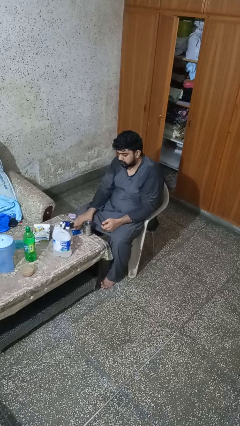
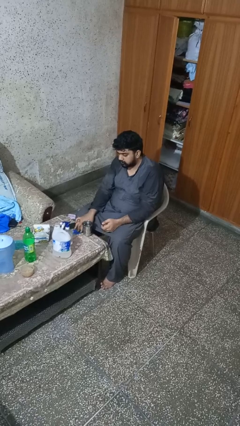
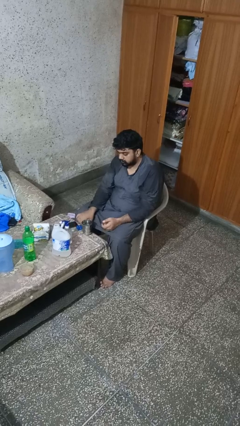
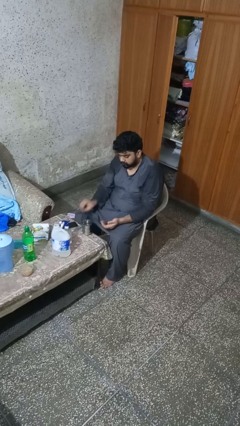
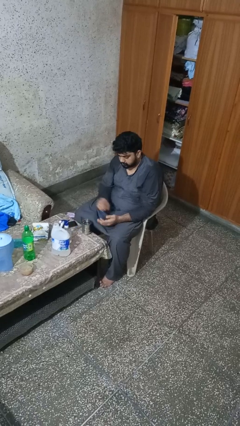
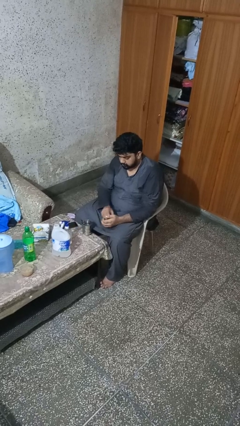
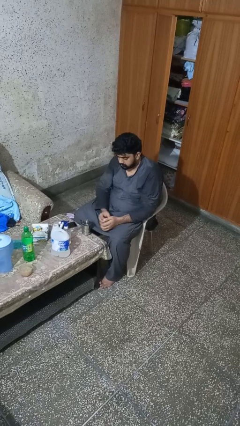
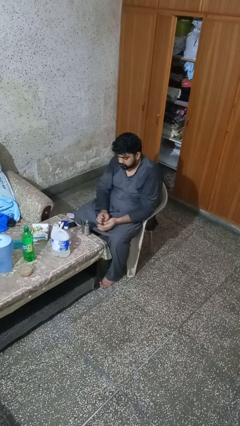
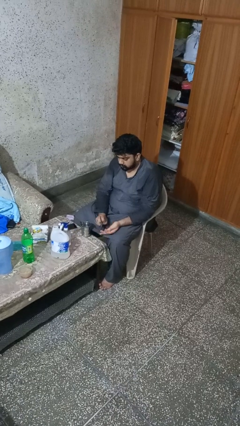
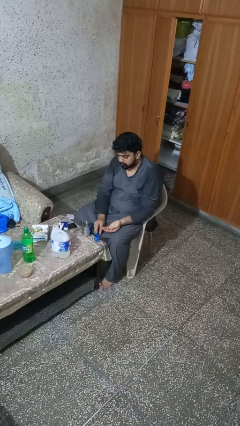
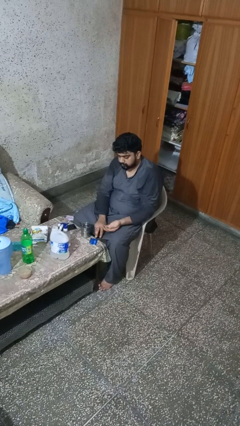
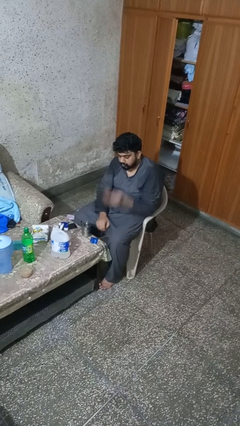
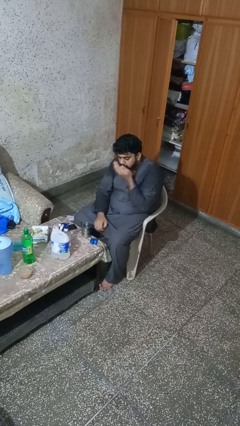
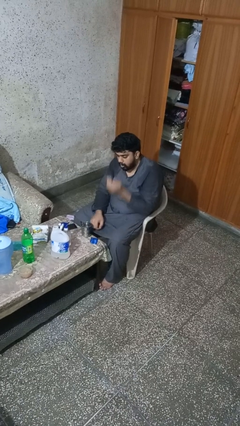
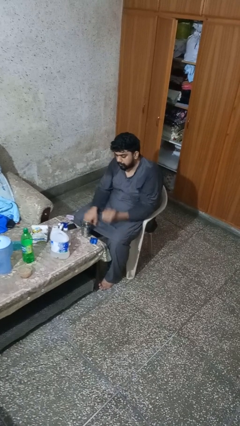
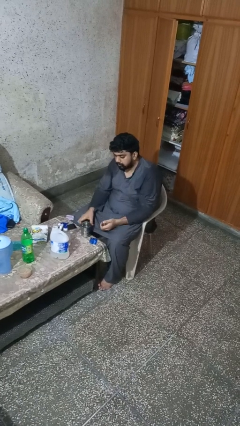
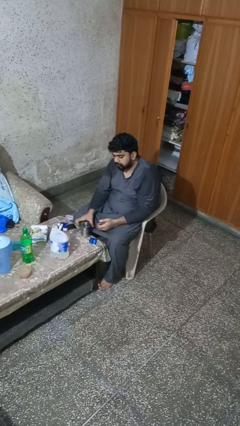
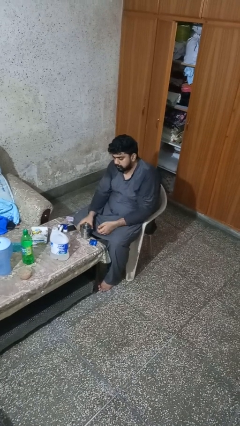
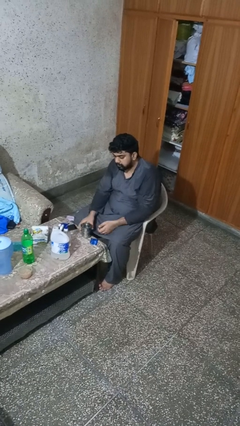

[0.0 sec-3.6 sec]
person takes medicine pills

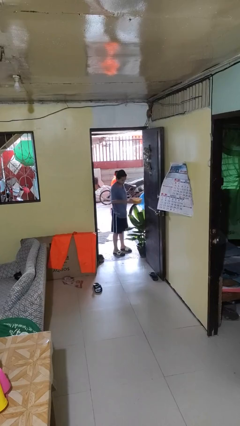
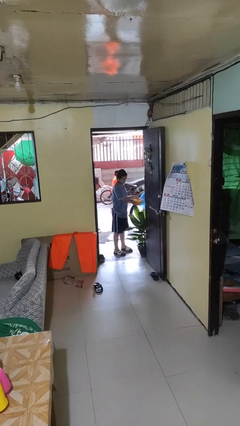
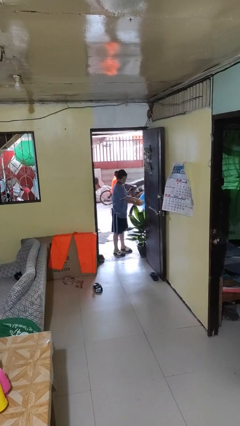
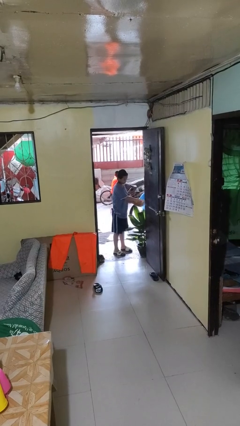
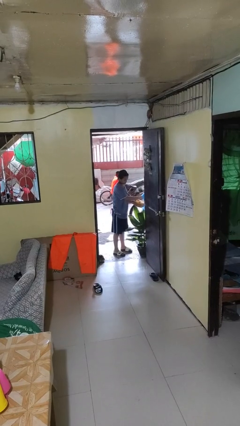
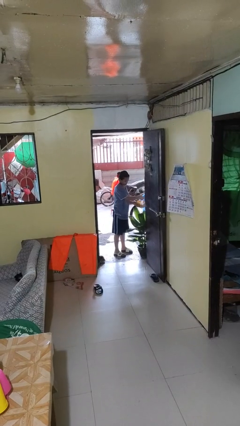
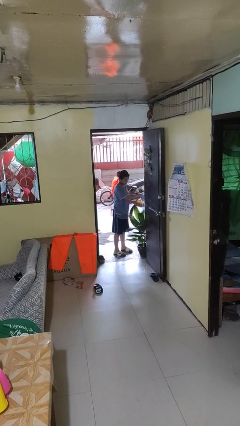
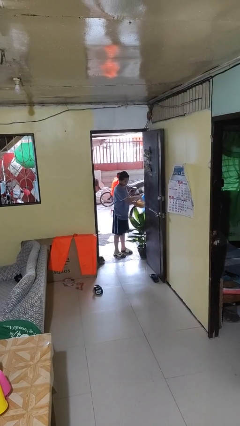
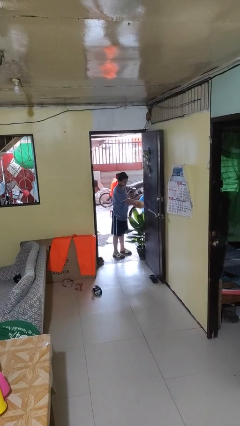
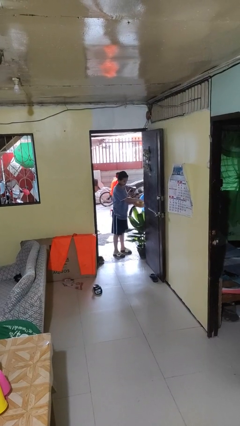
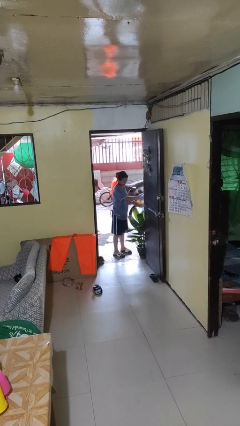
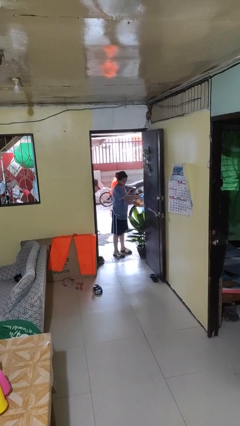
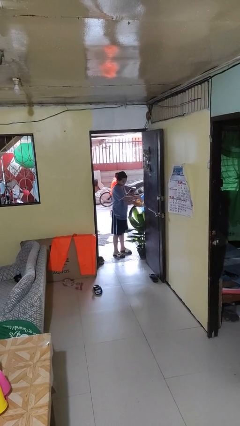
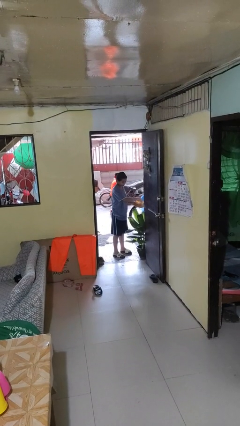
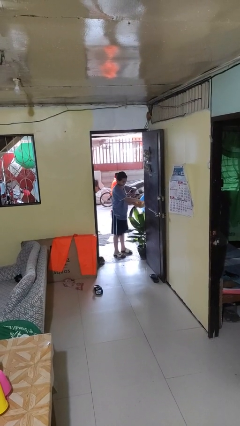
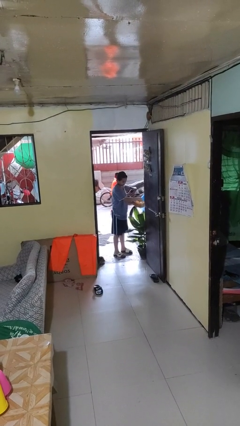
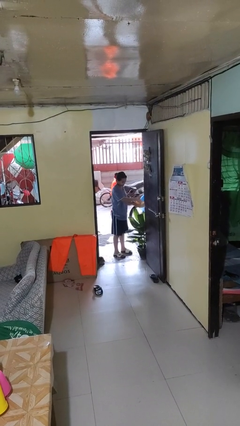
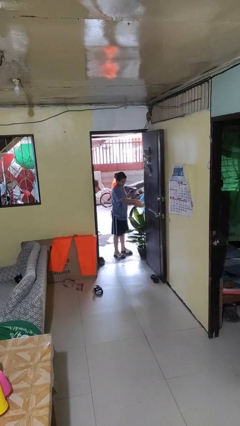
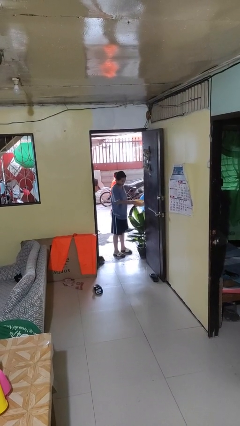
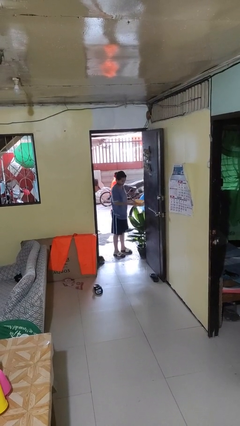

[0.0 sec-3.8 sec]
person waters houseplant

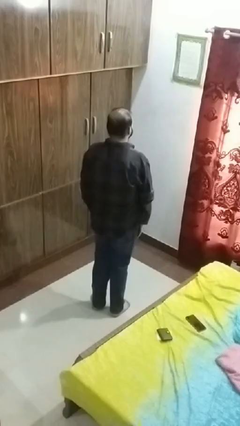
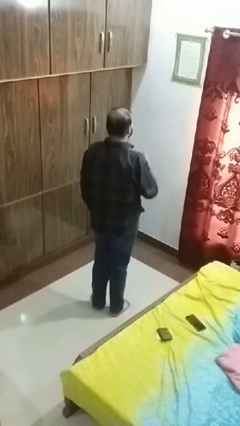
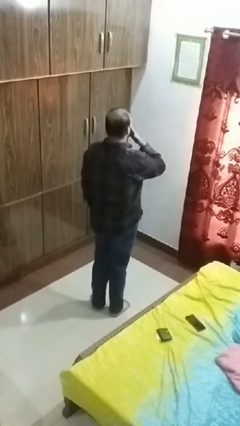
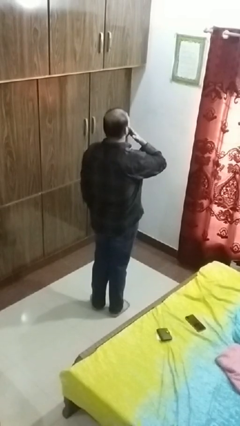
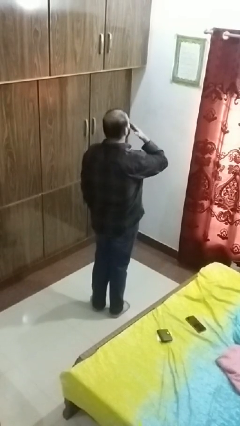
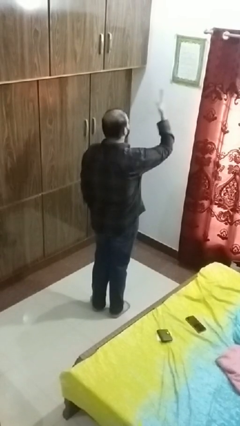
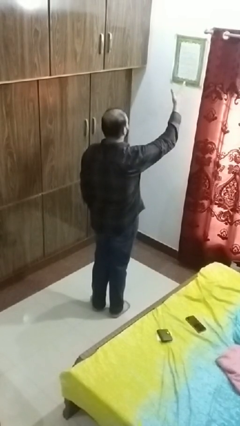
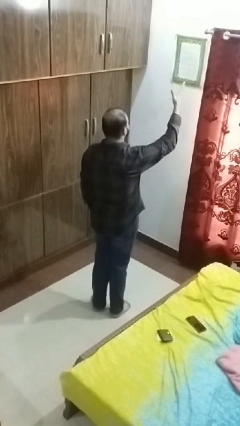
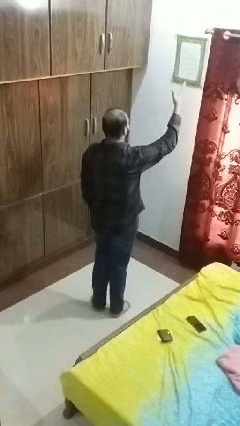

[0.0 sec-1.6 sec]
person gestures blow kiss

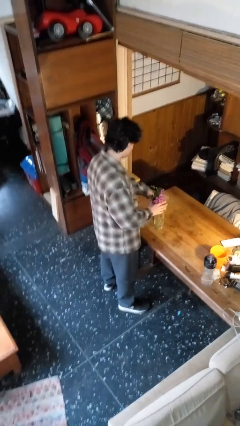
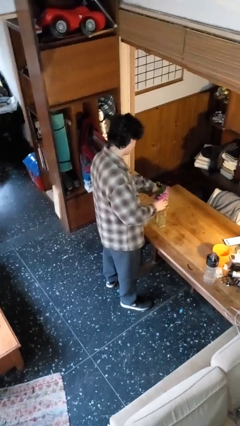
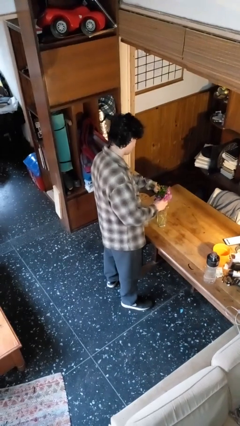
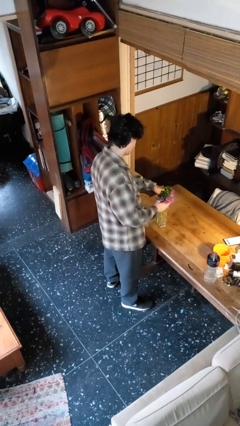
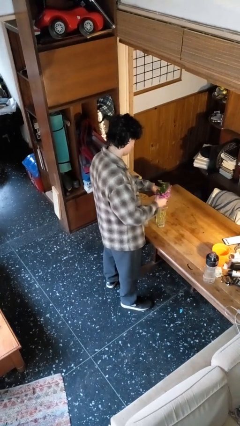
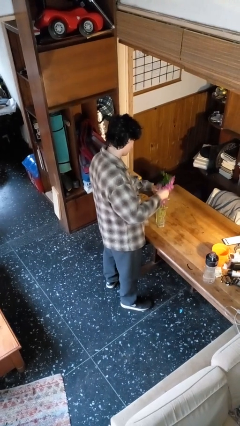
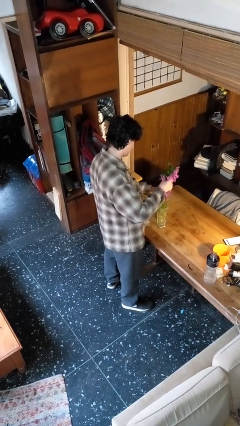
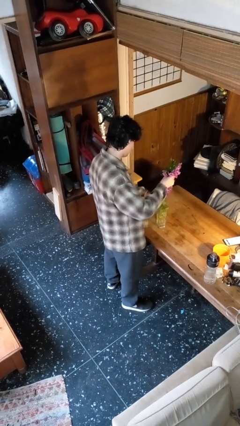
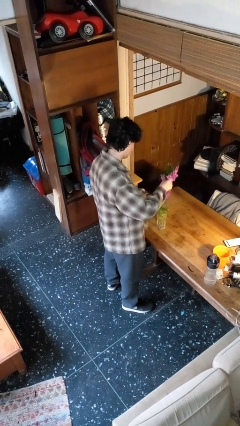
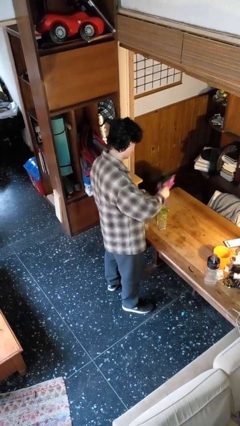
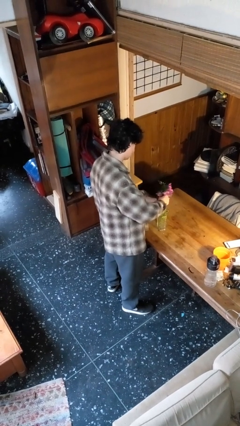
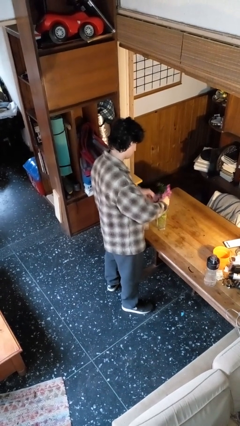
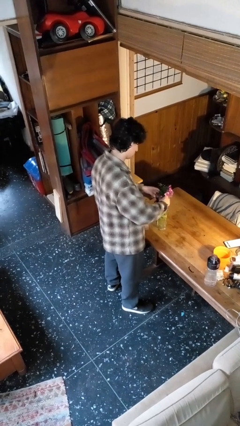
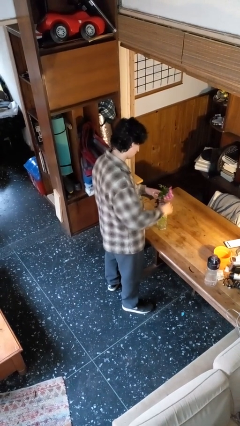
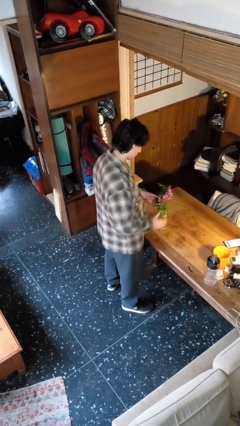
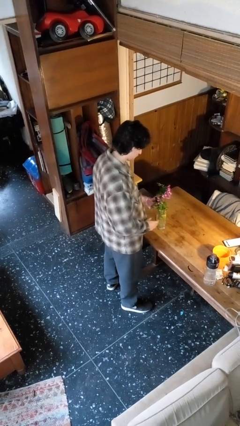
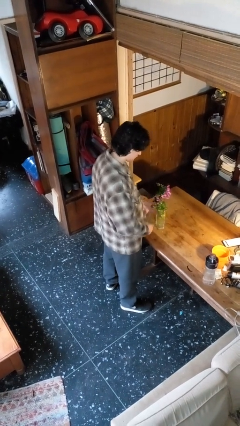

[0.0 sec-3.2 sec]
person arranges flowers in vase

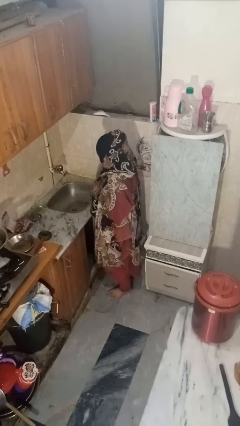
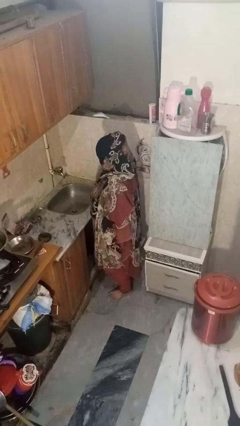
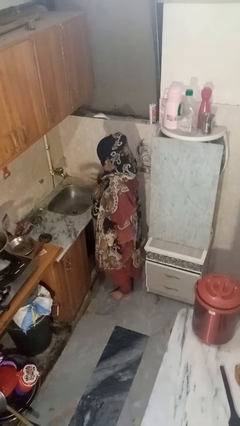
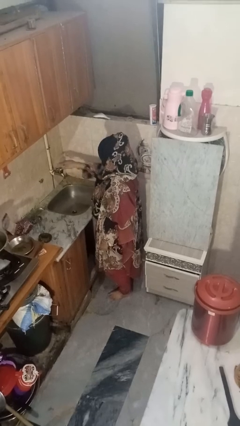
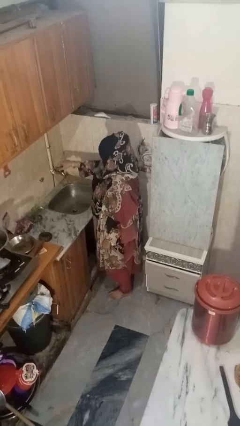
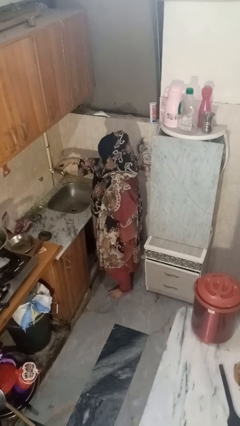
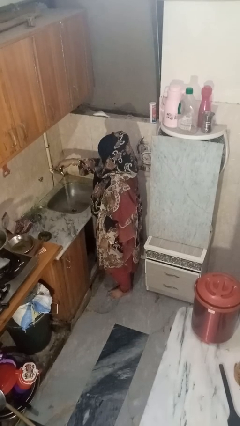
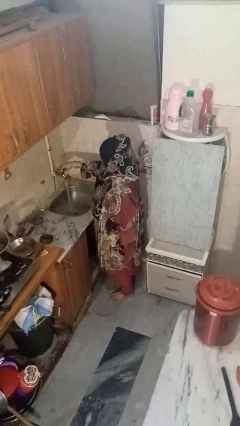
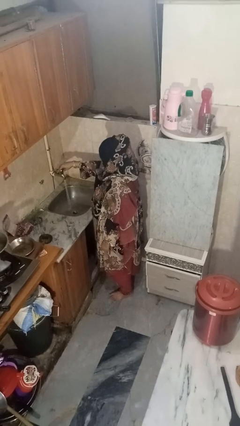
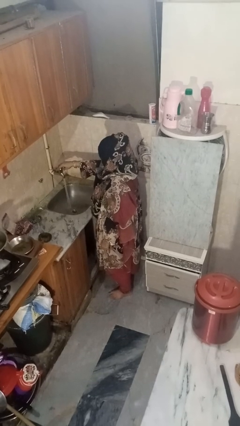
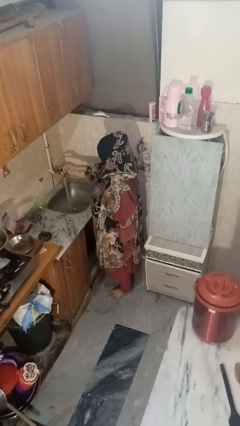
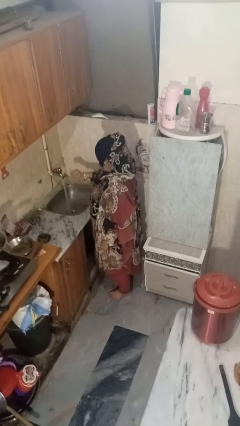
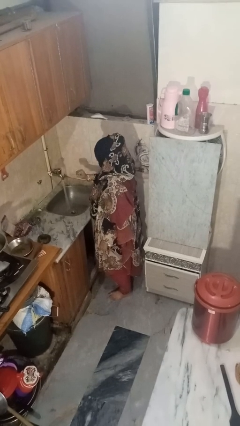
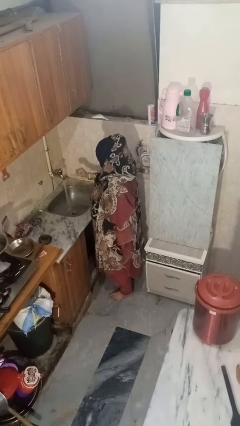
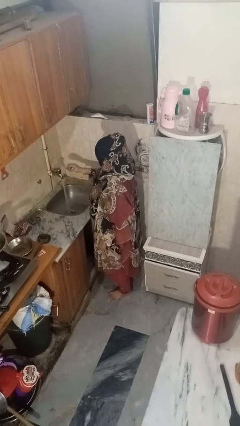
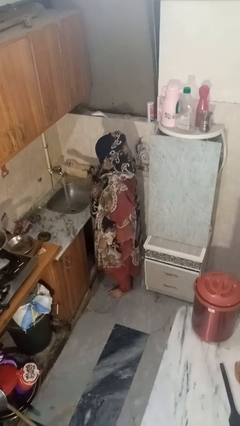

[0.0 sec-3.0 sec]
person turns on faucet

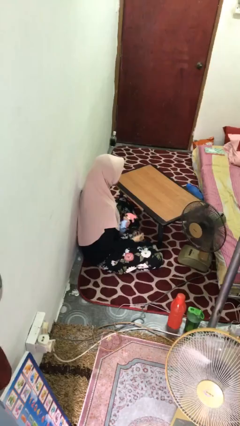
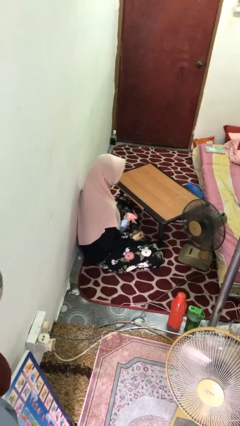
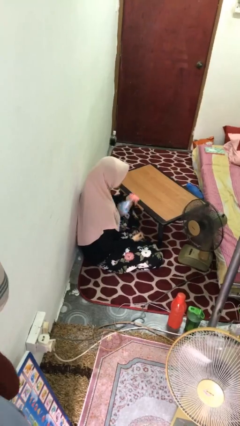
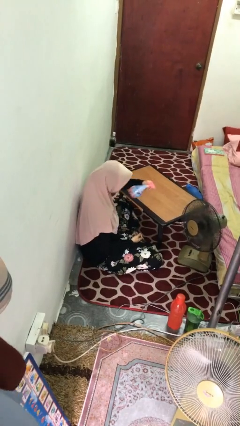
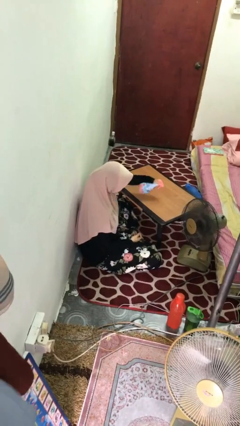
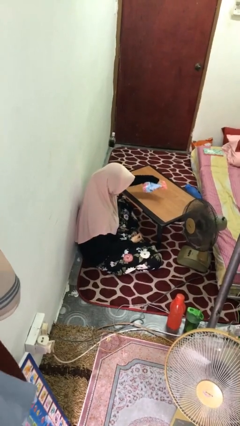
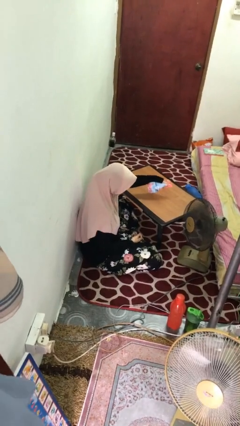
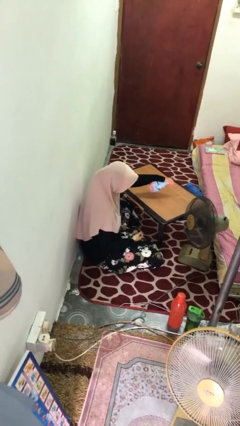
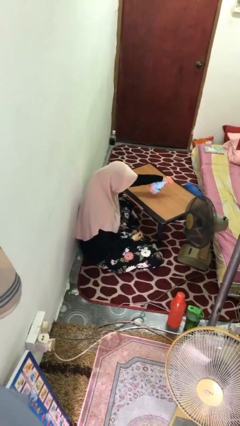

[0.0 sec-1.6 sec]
person sprays from bottle

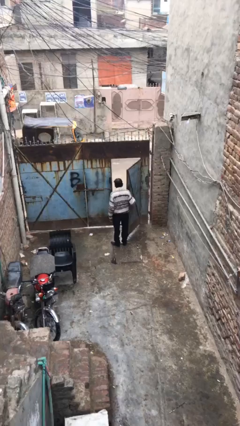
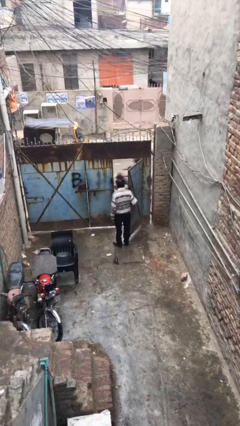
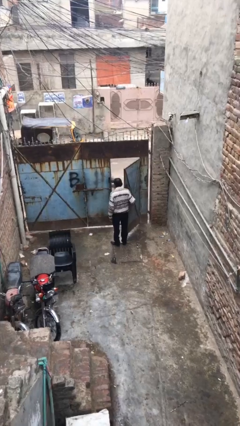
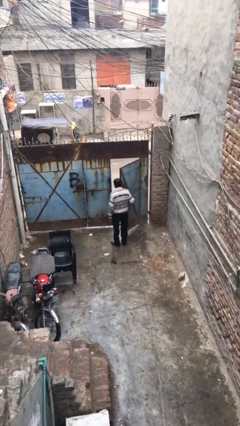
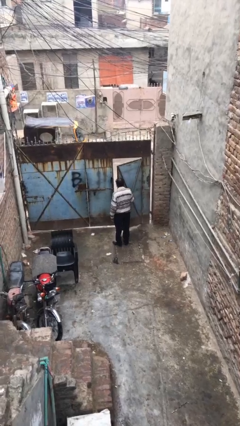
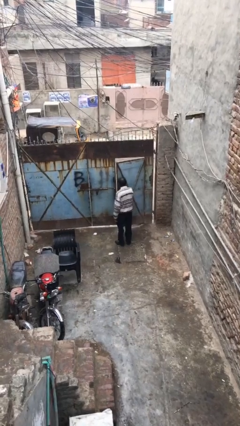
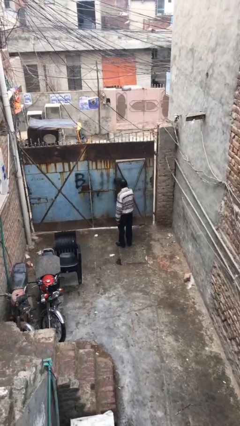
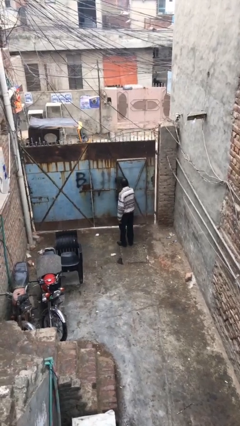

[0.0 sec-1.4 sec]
person closes facility door
